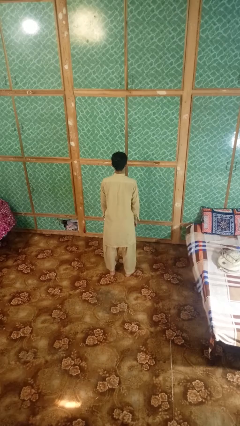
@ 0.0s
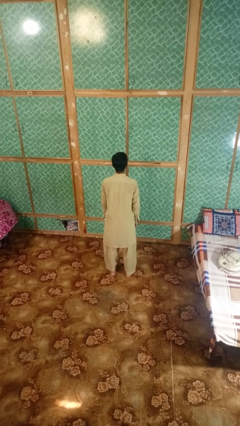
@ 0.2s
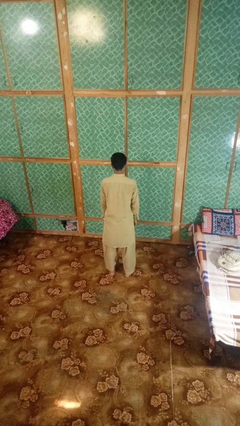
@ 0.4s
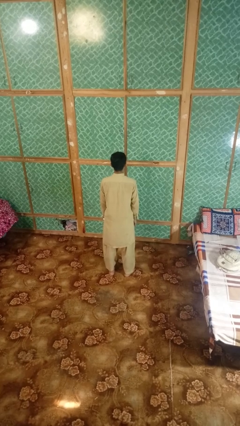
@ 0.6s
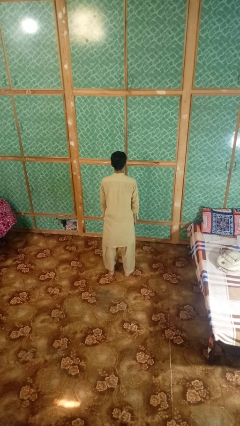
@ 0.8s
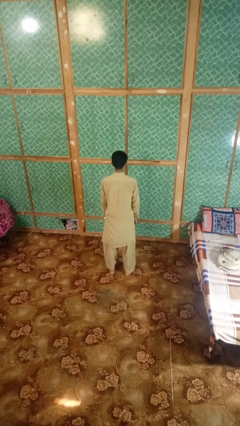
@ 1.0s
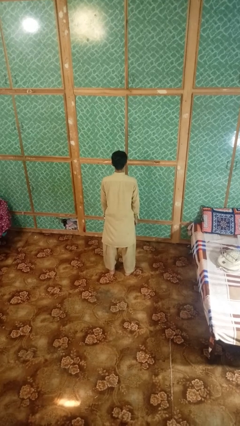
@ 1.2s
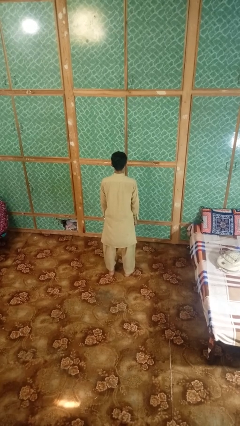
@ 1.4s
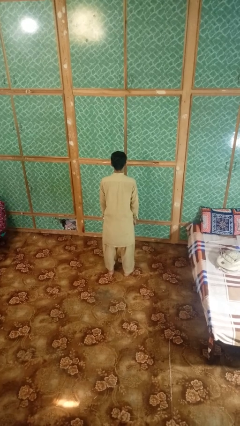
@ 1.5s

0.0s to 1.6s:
person shakes head

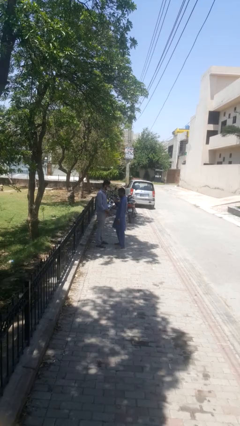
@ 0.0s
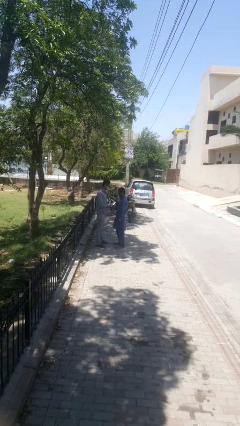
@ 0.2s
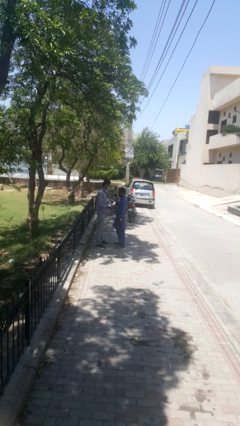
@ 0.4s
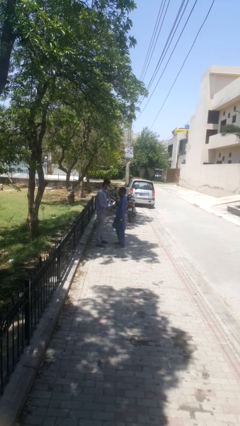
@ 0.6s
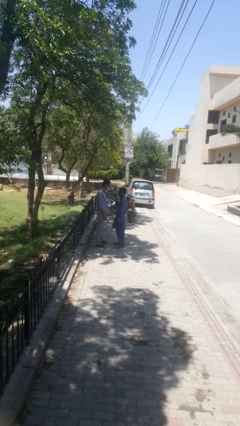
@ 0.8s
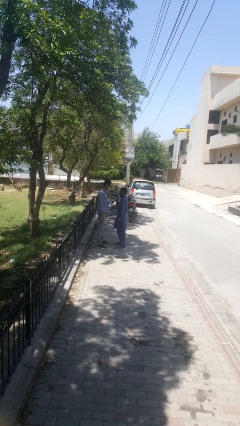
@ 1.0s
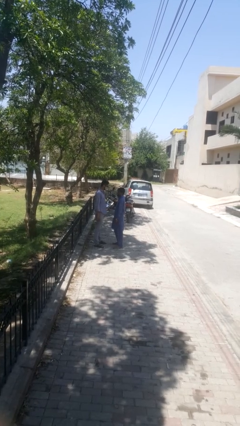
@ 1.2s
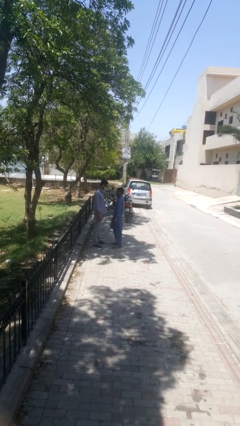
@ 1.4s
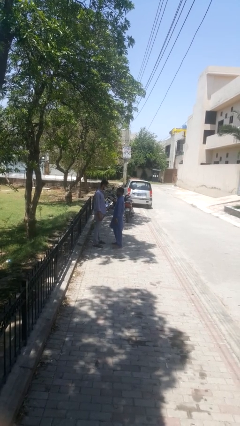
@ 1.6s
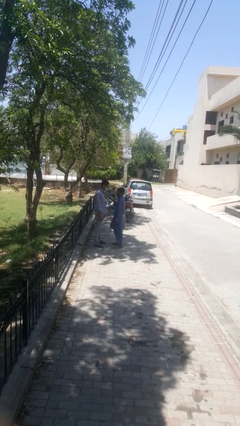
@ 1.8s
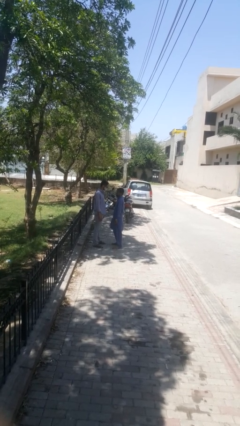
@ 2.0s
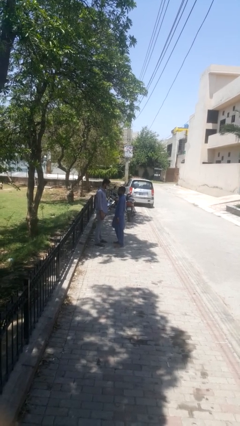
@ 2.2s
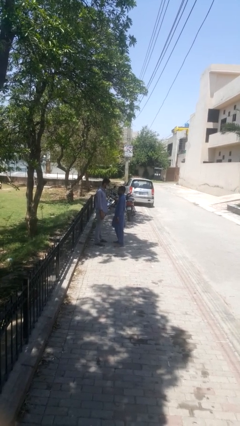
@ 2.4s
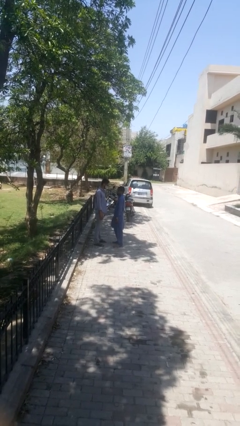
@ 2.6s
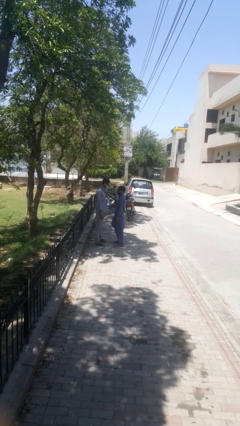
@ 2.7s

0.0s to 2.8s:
person highfives hand

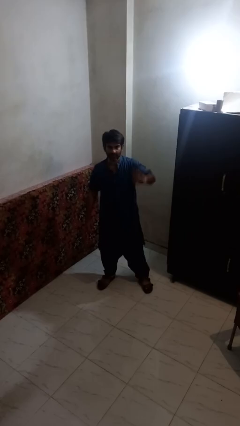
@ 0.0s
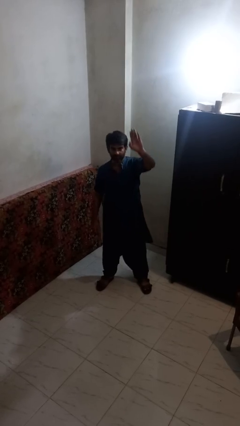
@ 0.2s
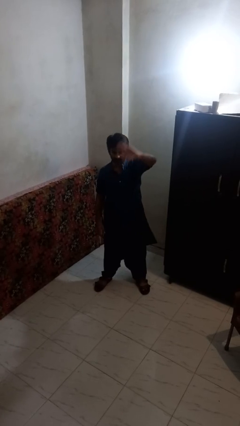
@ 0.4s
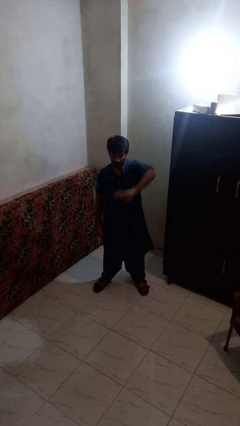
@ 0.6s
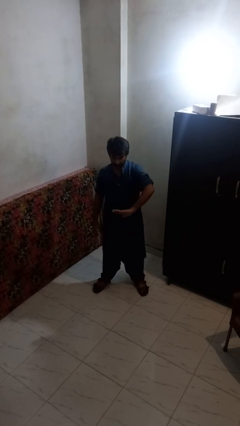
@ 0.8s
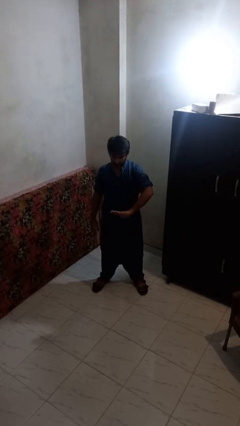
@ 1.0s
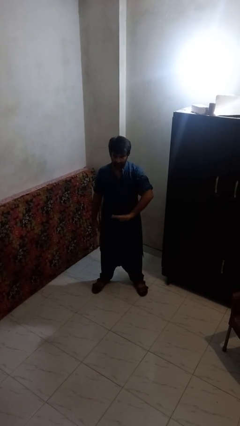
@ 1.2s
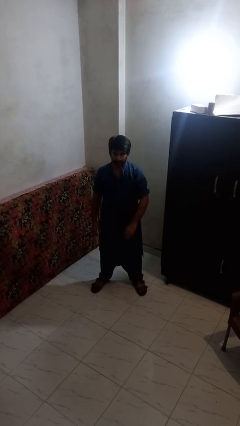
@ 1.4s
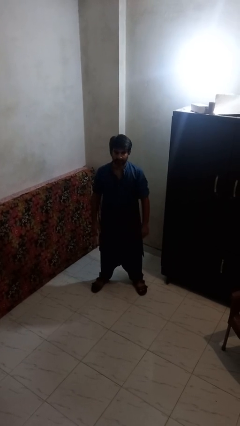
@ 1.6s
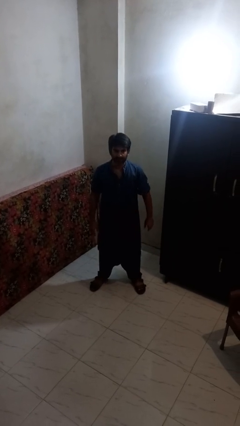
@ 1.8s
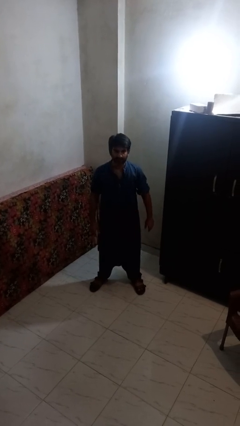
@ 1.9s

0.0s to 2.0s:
person gestures swipe down

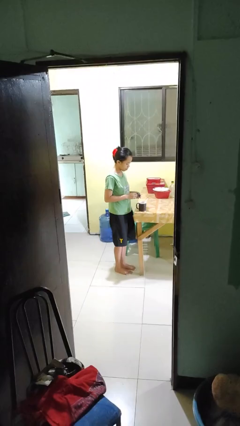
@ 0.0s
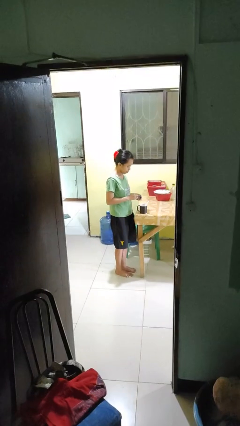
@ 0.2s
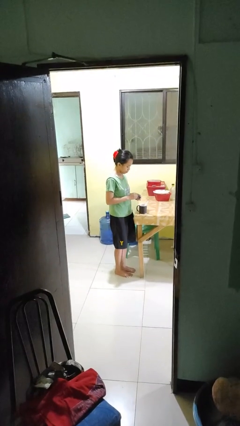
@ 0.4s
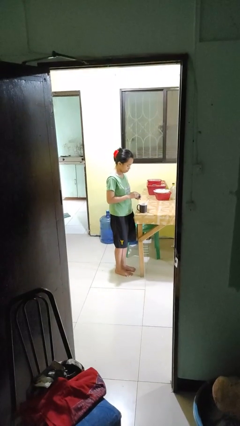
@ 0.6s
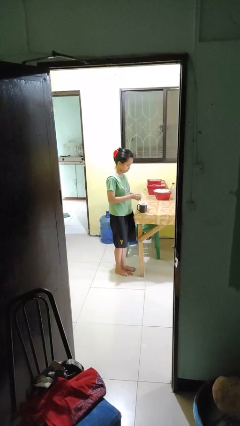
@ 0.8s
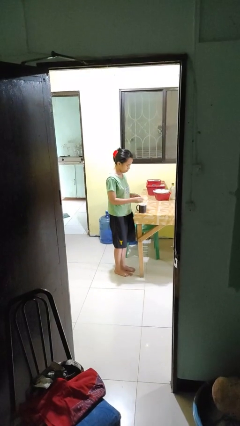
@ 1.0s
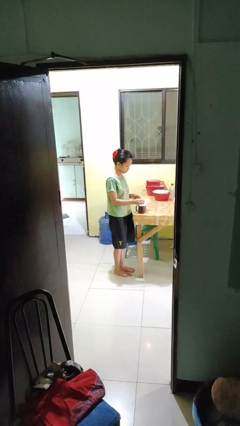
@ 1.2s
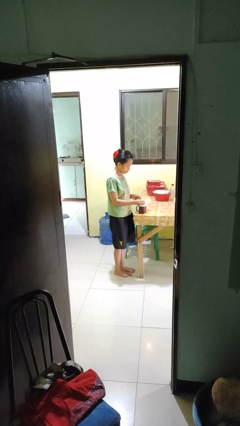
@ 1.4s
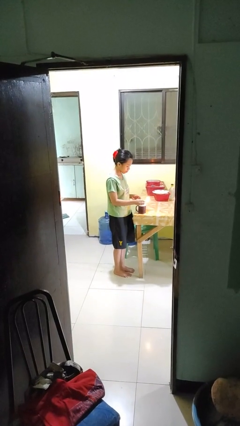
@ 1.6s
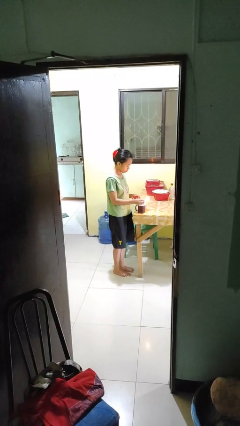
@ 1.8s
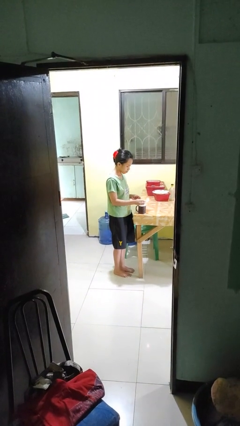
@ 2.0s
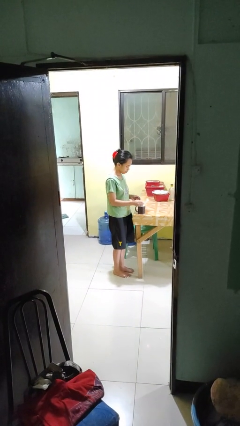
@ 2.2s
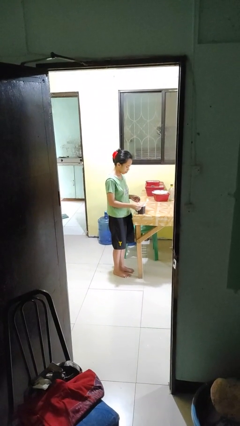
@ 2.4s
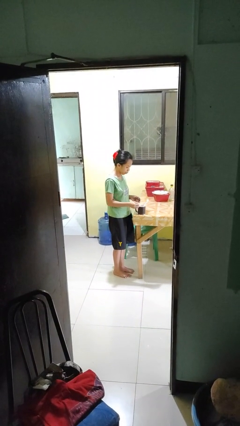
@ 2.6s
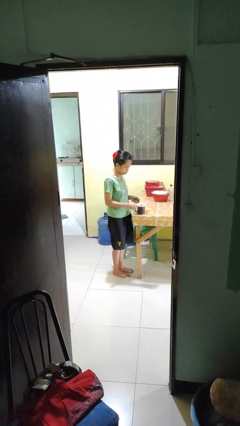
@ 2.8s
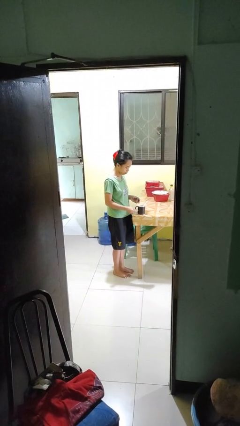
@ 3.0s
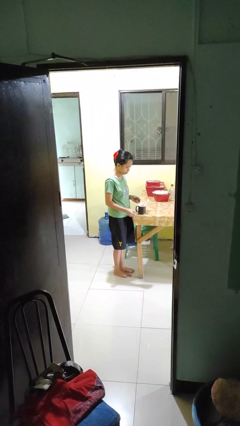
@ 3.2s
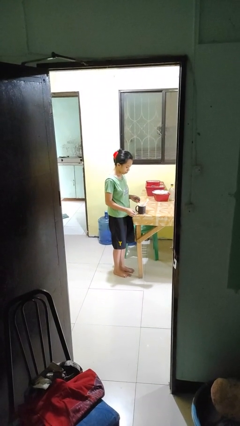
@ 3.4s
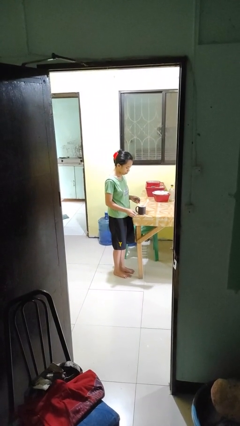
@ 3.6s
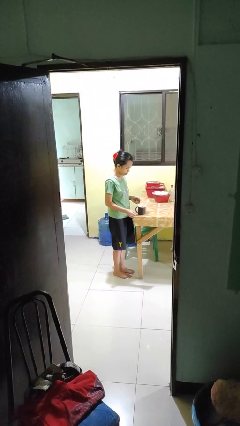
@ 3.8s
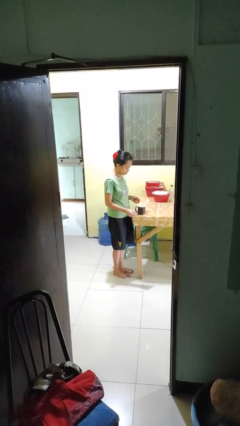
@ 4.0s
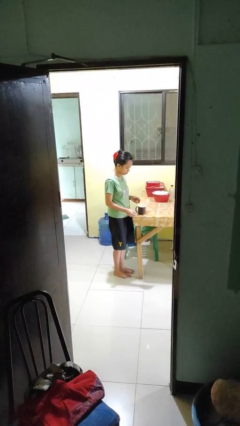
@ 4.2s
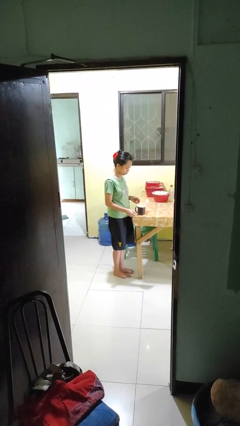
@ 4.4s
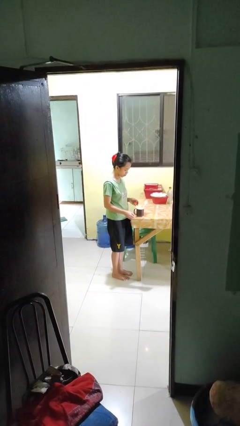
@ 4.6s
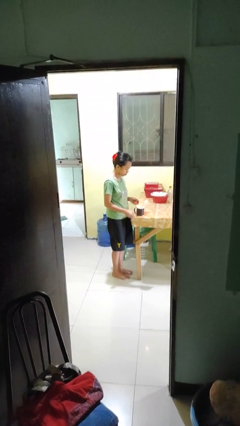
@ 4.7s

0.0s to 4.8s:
person lights candle

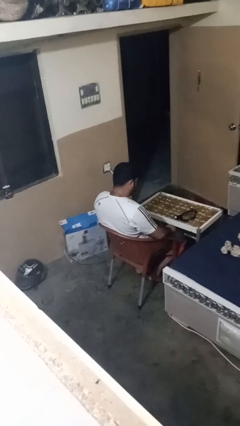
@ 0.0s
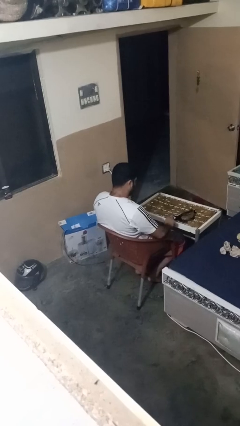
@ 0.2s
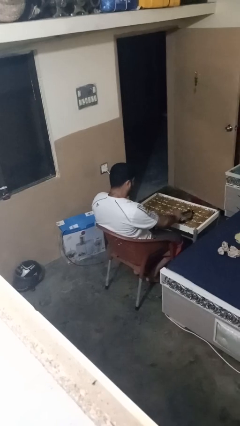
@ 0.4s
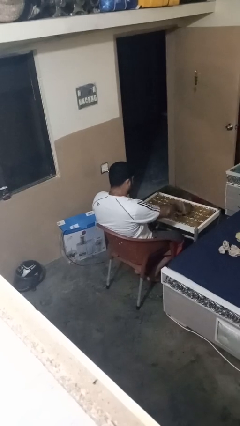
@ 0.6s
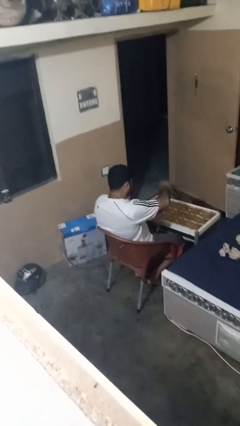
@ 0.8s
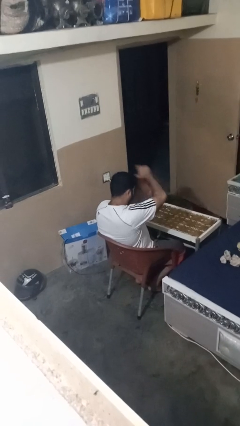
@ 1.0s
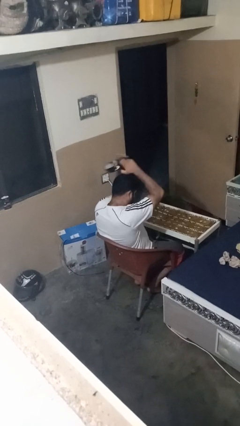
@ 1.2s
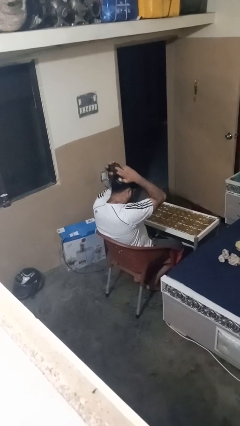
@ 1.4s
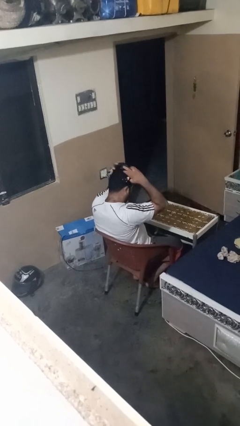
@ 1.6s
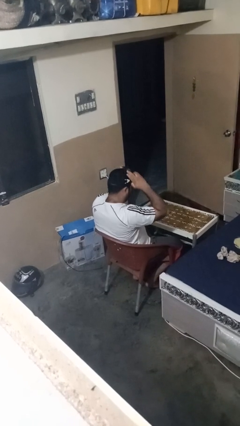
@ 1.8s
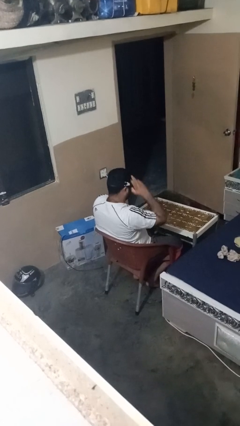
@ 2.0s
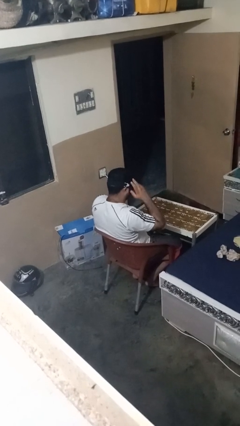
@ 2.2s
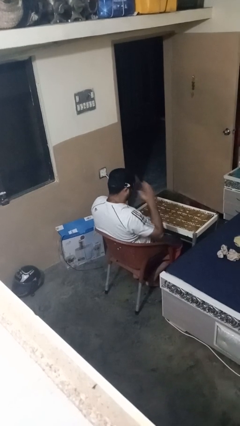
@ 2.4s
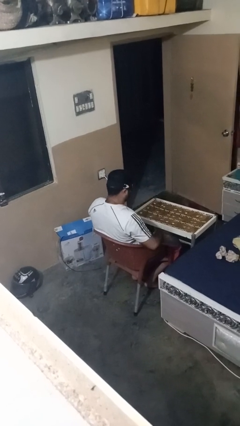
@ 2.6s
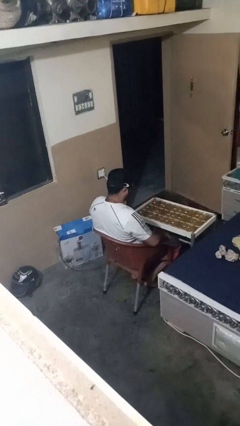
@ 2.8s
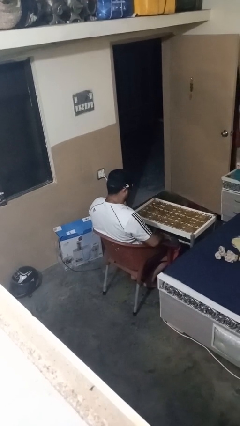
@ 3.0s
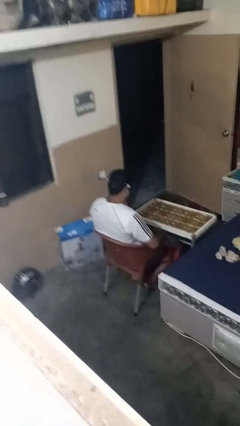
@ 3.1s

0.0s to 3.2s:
person puts on sunglasses

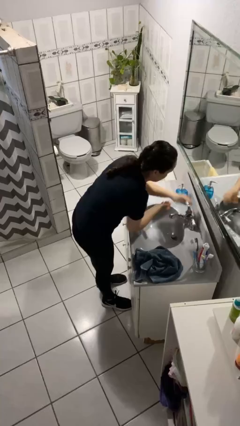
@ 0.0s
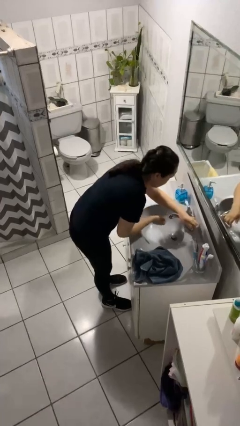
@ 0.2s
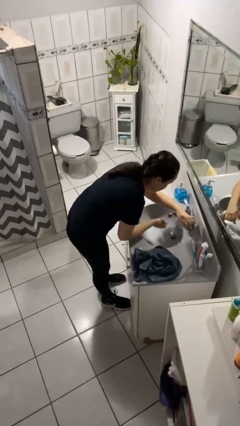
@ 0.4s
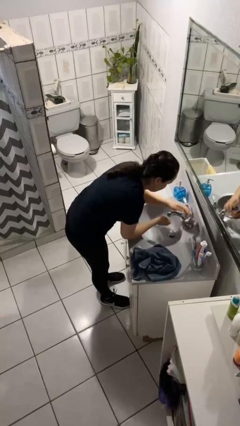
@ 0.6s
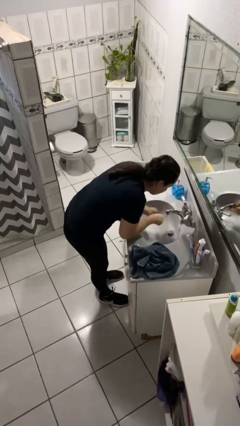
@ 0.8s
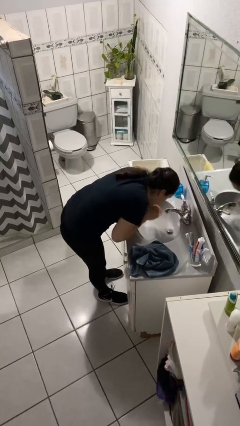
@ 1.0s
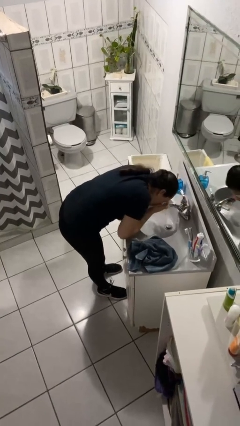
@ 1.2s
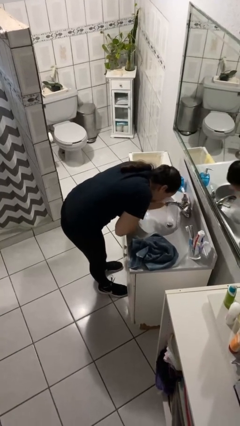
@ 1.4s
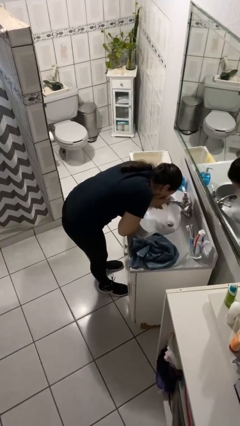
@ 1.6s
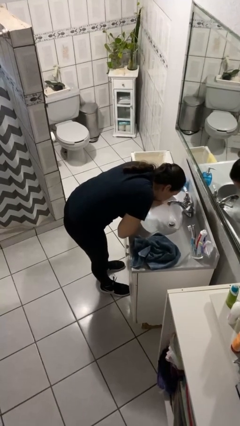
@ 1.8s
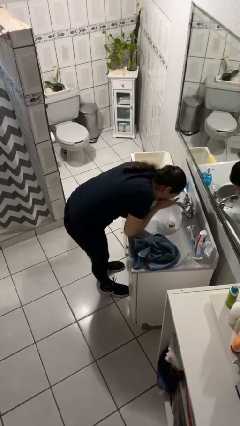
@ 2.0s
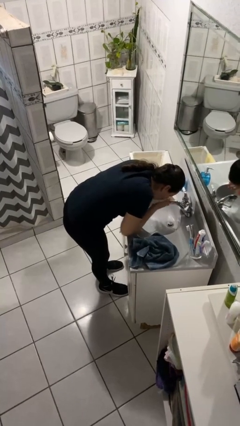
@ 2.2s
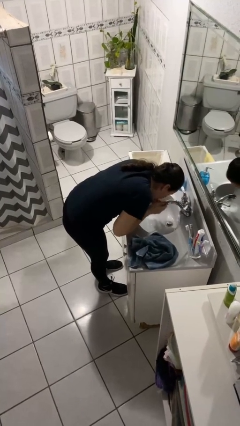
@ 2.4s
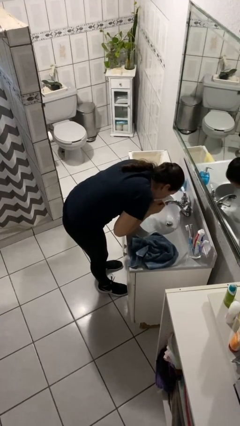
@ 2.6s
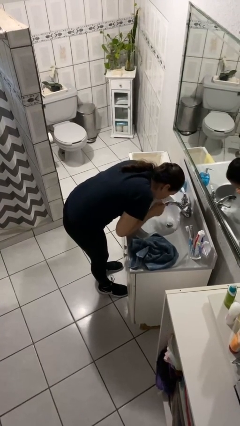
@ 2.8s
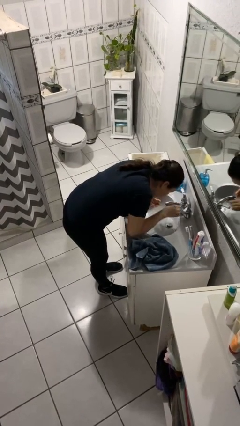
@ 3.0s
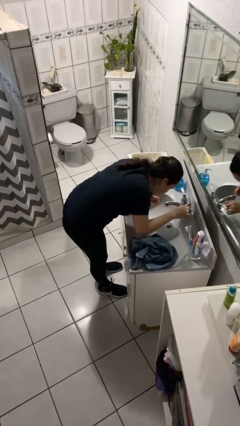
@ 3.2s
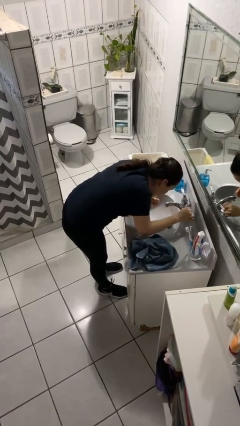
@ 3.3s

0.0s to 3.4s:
person washes face

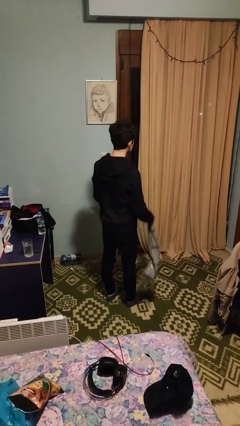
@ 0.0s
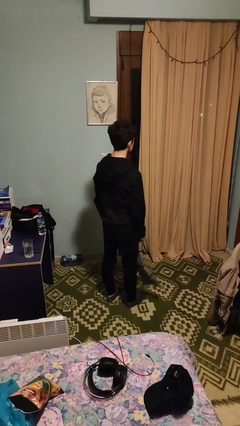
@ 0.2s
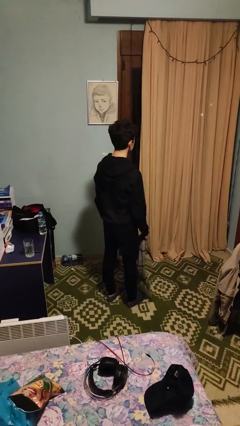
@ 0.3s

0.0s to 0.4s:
person takes off scarf
